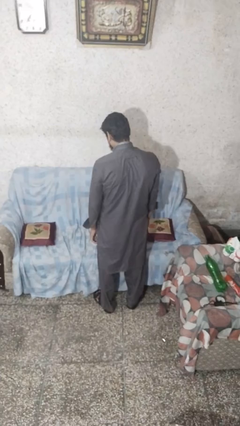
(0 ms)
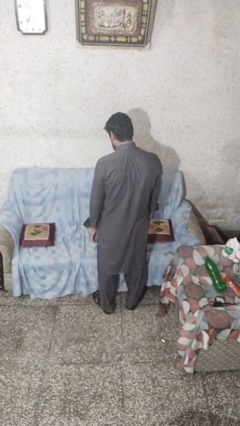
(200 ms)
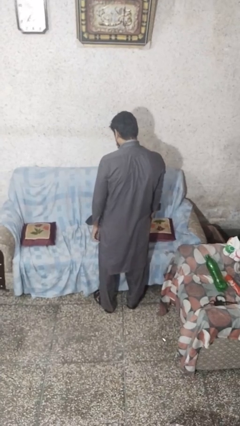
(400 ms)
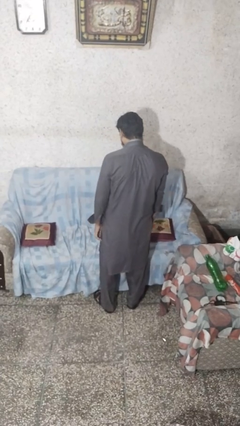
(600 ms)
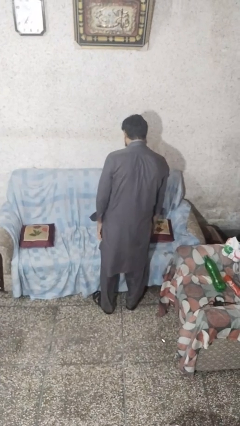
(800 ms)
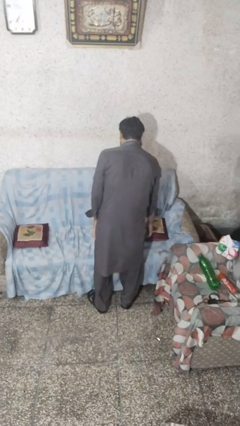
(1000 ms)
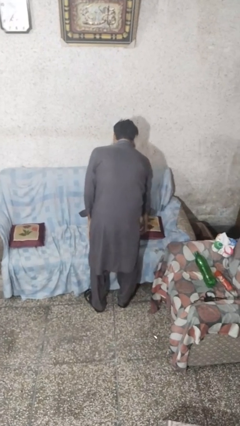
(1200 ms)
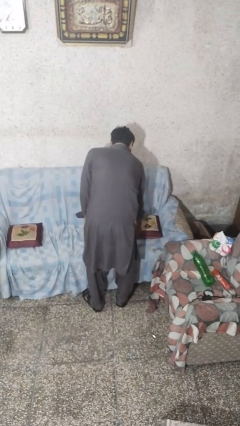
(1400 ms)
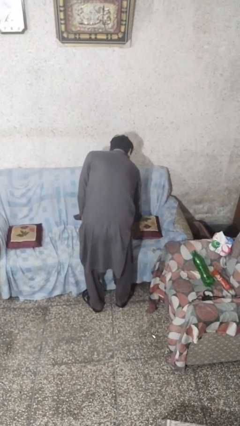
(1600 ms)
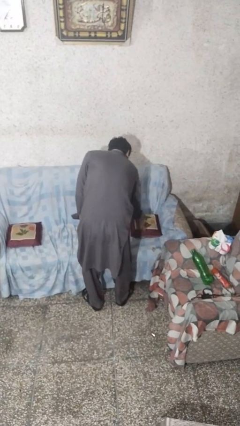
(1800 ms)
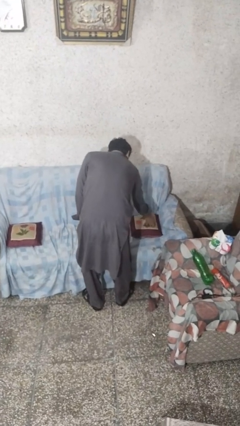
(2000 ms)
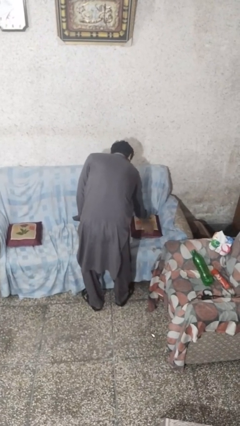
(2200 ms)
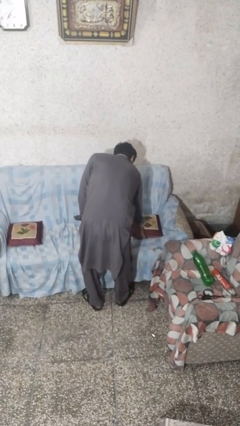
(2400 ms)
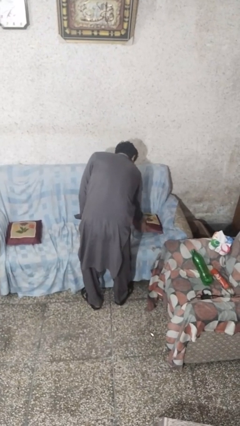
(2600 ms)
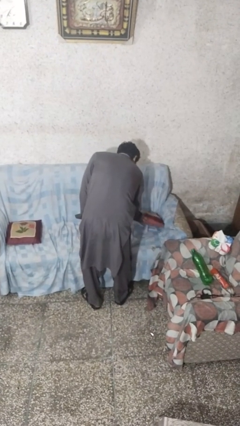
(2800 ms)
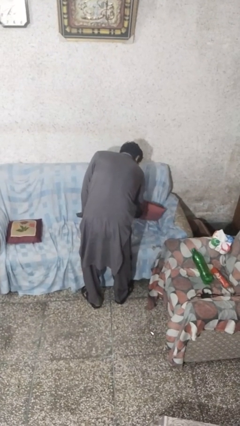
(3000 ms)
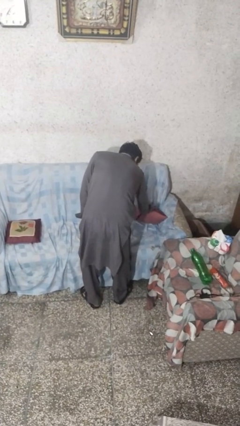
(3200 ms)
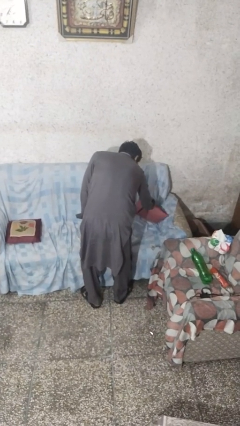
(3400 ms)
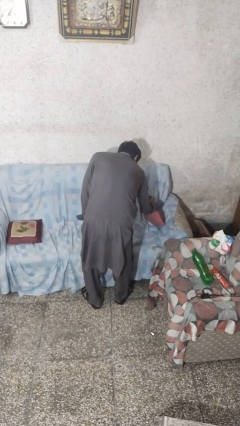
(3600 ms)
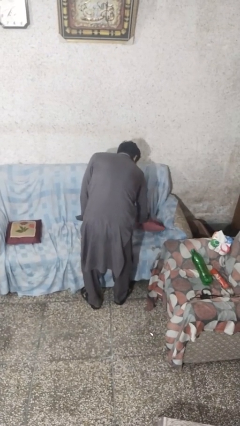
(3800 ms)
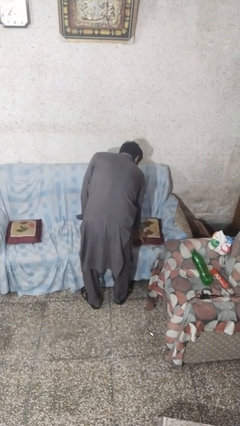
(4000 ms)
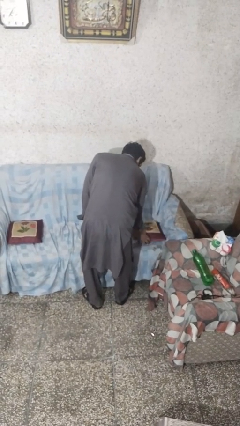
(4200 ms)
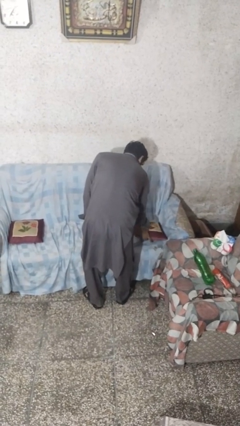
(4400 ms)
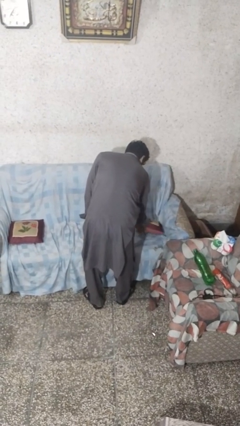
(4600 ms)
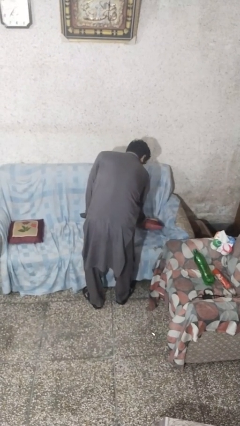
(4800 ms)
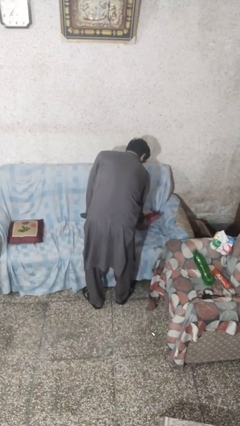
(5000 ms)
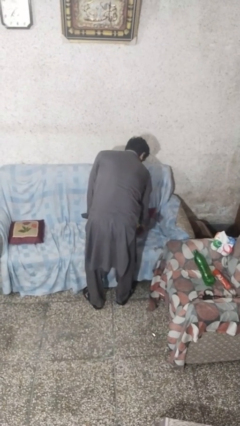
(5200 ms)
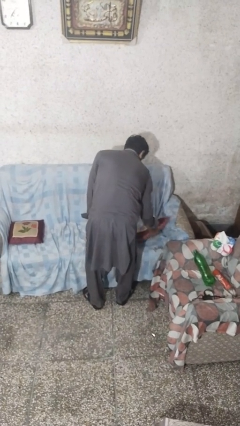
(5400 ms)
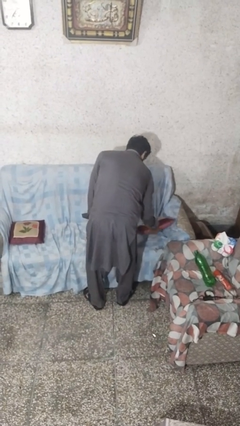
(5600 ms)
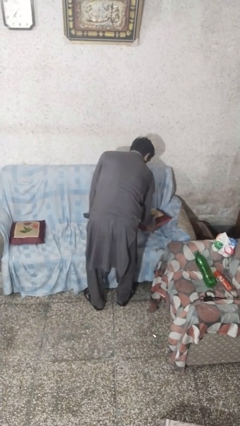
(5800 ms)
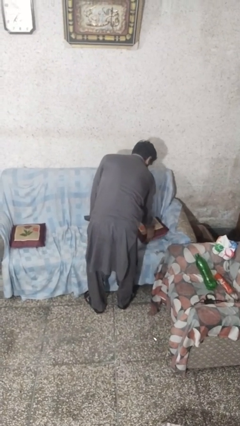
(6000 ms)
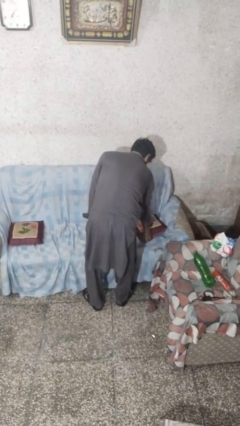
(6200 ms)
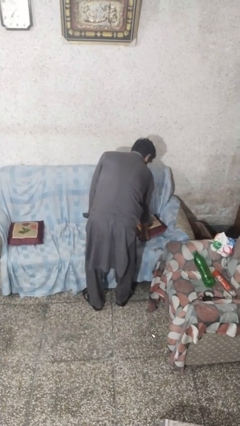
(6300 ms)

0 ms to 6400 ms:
person searches in couch

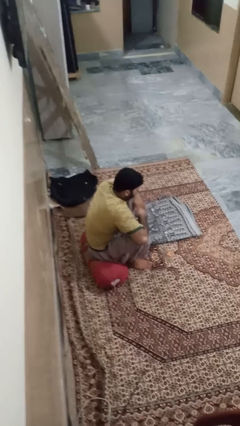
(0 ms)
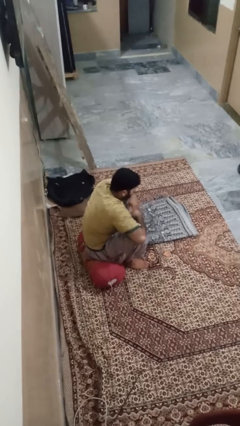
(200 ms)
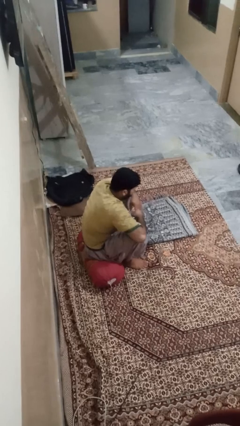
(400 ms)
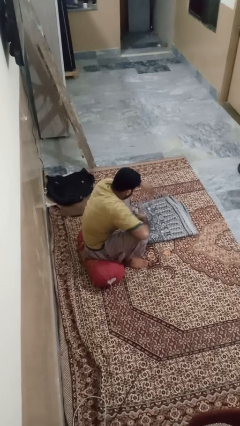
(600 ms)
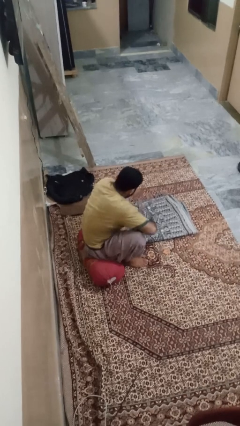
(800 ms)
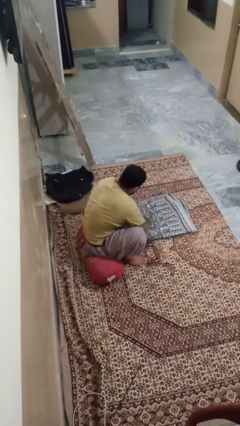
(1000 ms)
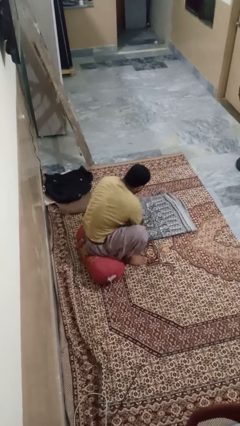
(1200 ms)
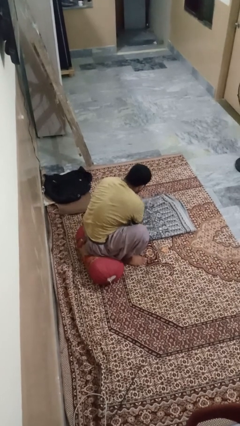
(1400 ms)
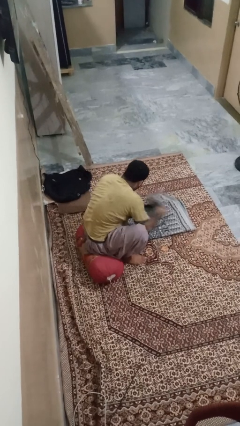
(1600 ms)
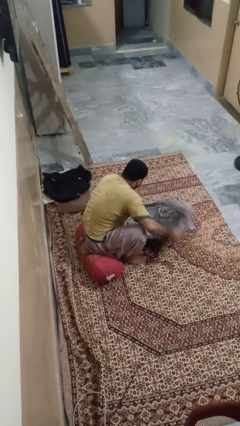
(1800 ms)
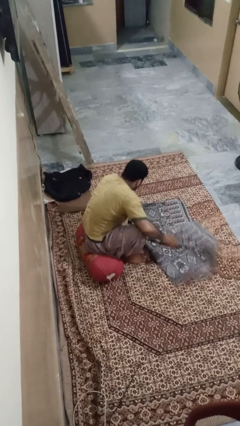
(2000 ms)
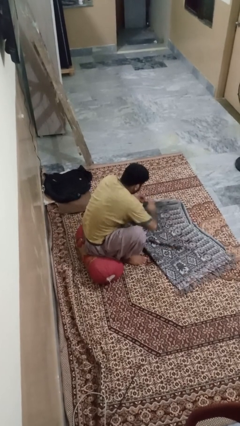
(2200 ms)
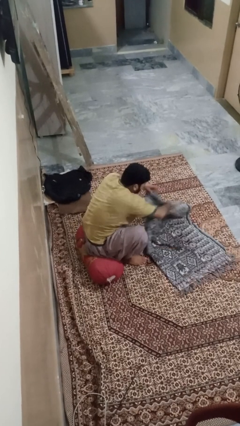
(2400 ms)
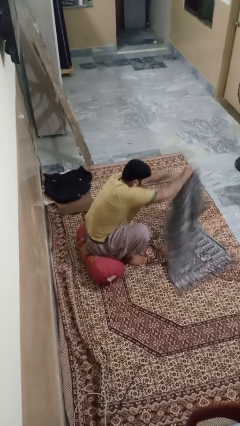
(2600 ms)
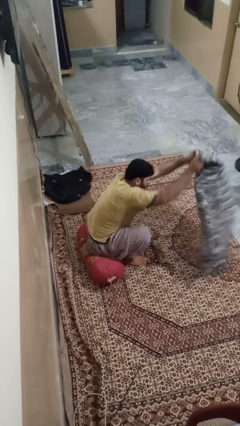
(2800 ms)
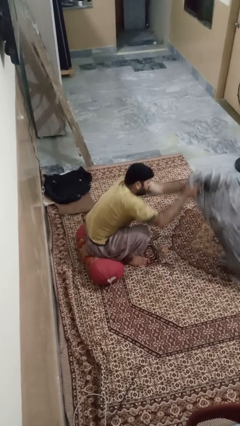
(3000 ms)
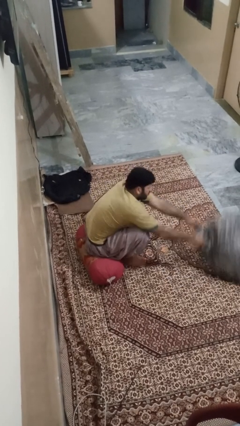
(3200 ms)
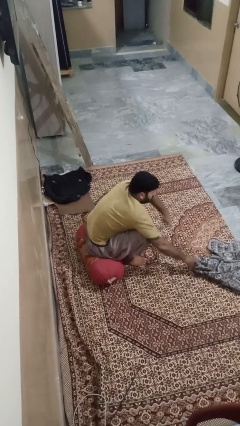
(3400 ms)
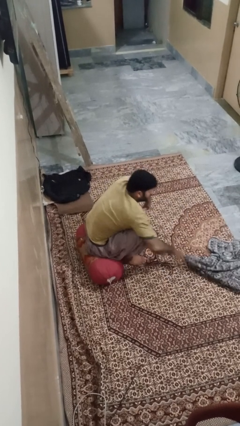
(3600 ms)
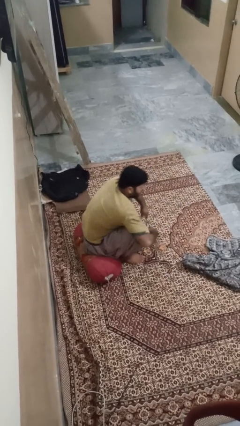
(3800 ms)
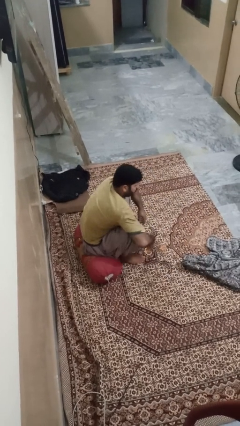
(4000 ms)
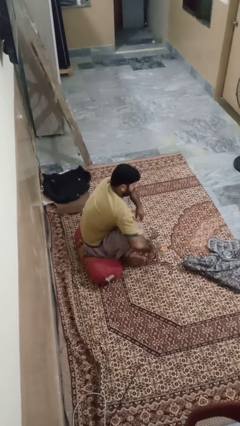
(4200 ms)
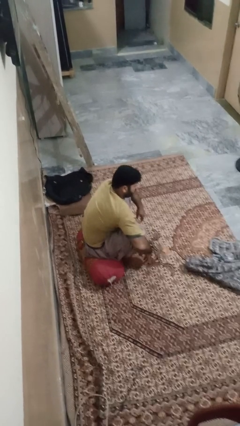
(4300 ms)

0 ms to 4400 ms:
person unfolds blanket

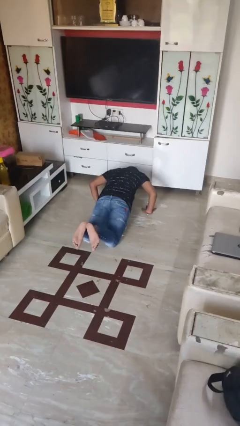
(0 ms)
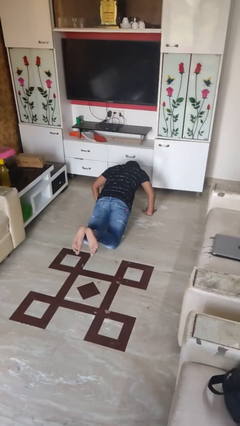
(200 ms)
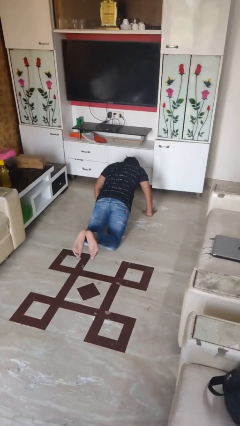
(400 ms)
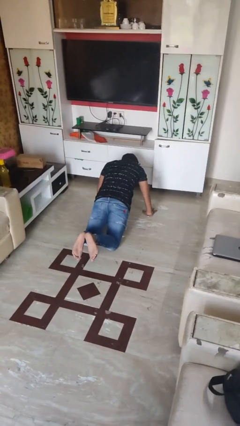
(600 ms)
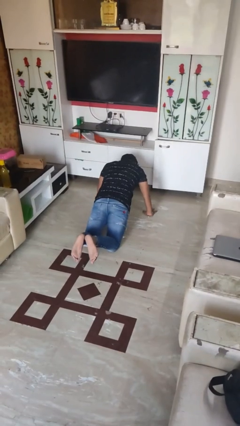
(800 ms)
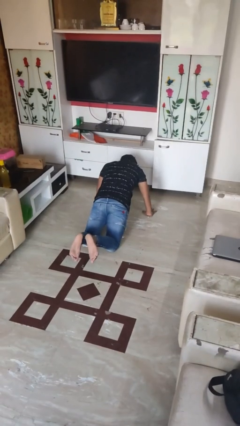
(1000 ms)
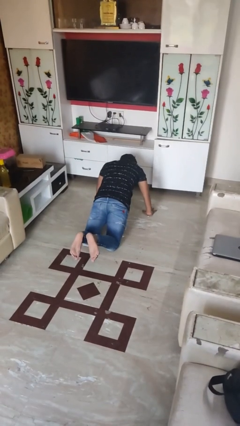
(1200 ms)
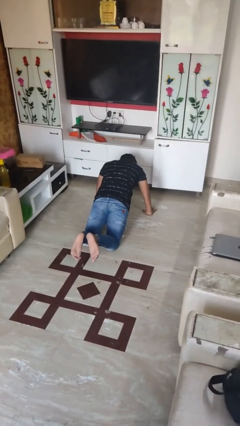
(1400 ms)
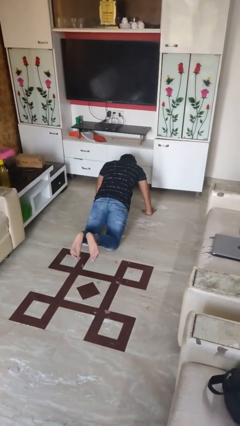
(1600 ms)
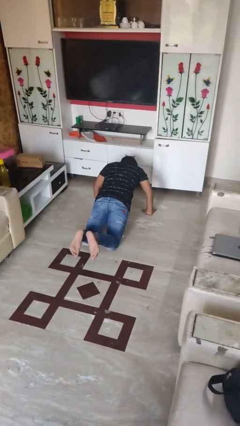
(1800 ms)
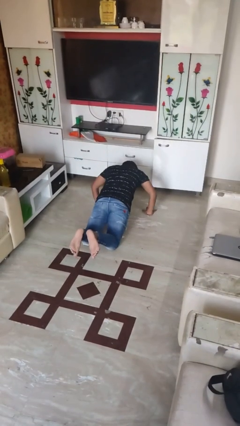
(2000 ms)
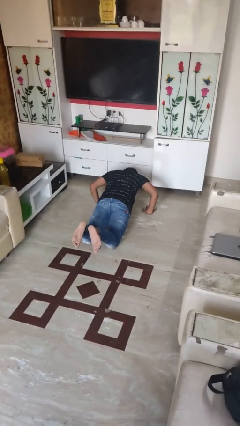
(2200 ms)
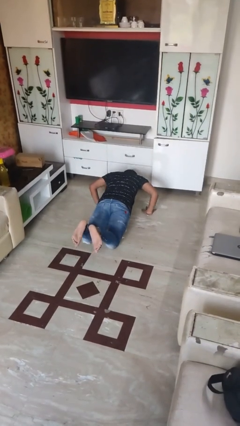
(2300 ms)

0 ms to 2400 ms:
person exercises with pushup

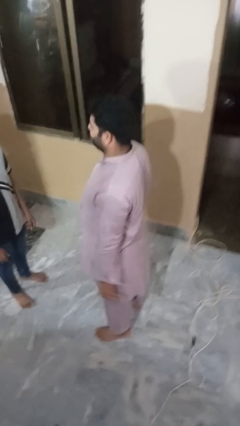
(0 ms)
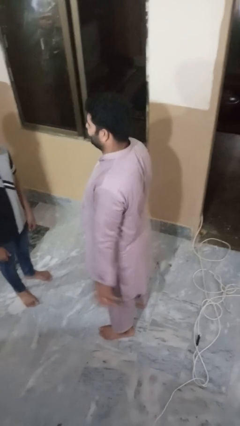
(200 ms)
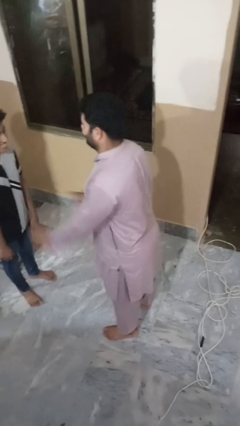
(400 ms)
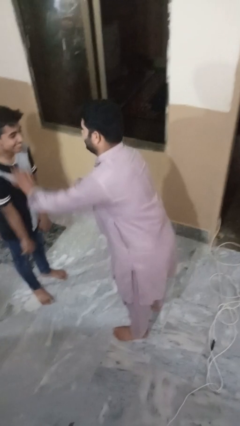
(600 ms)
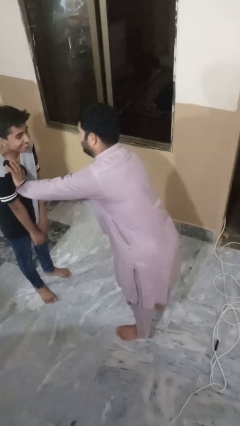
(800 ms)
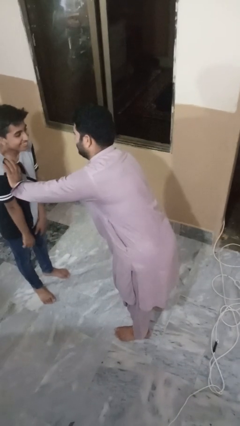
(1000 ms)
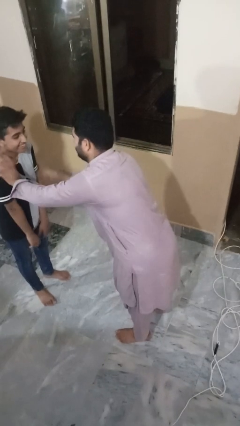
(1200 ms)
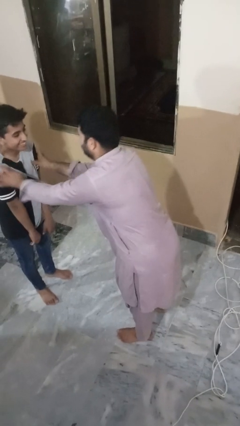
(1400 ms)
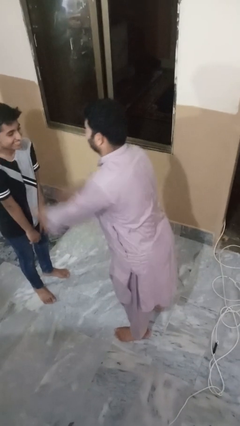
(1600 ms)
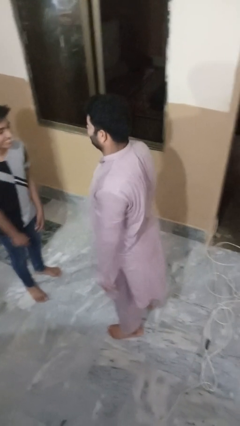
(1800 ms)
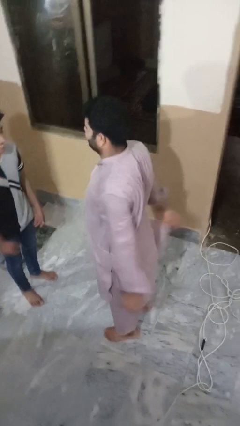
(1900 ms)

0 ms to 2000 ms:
person tickles person

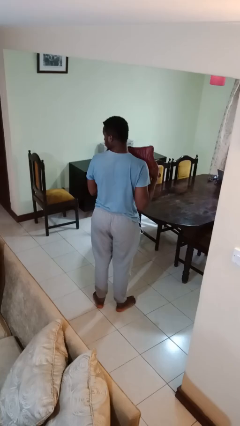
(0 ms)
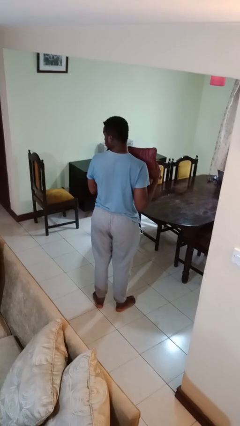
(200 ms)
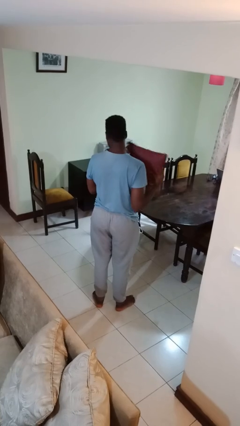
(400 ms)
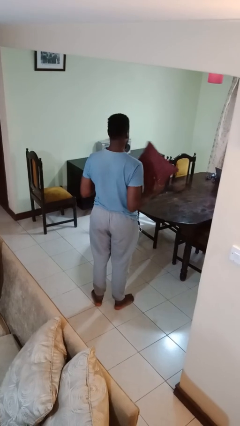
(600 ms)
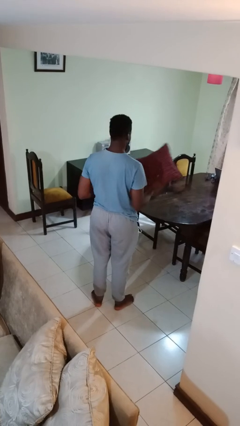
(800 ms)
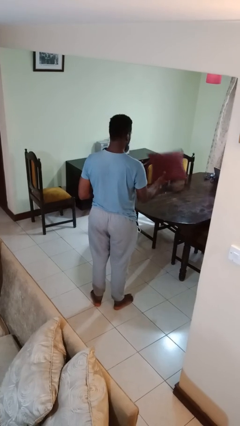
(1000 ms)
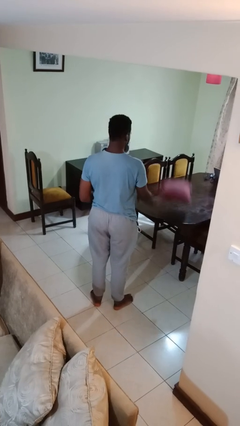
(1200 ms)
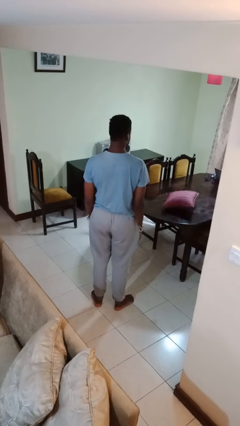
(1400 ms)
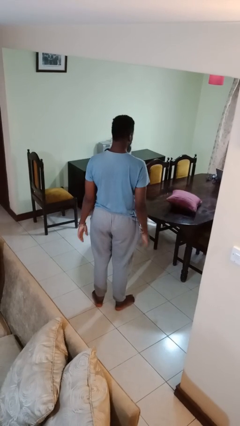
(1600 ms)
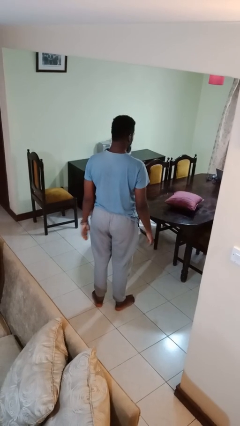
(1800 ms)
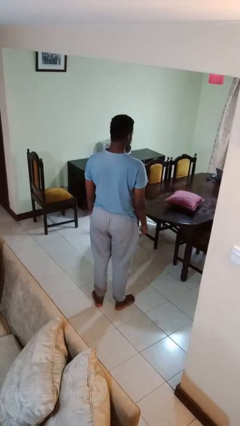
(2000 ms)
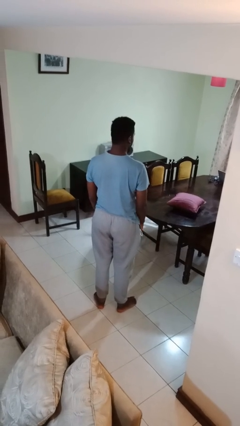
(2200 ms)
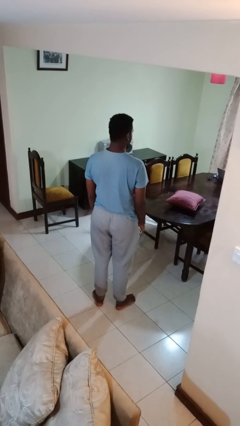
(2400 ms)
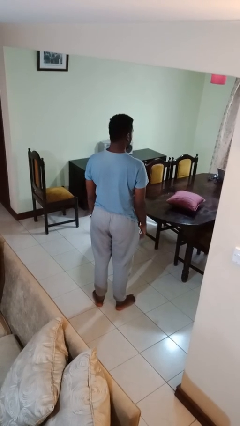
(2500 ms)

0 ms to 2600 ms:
person throws object on table

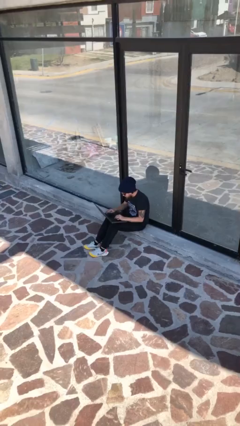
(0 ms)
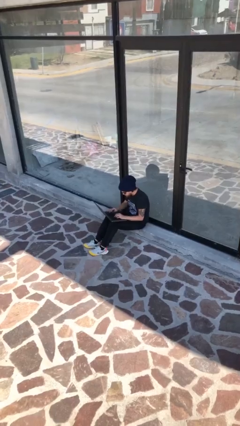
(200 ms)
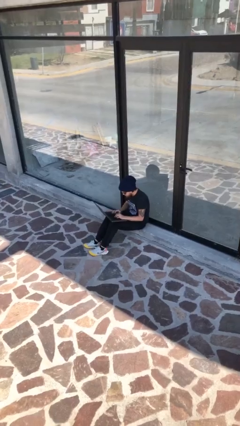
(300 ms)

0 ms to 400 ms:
person interacts with laptop
